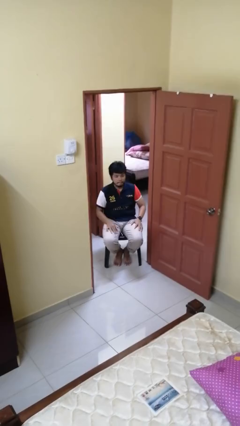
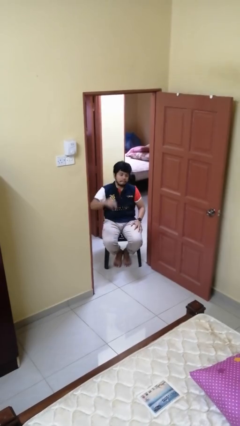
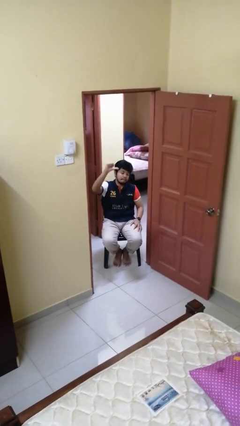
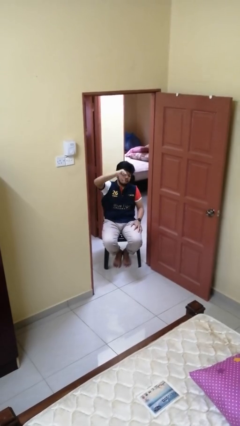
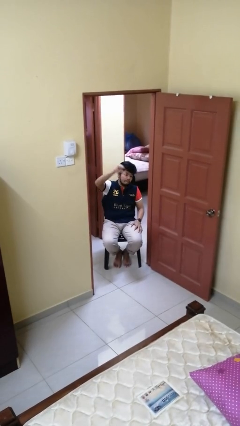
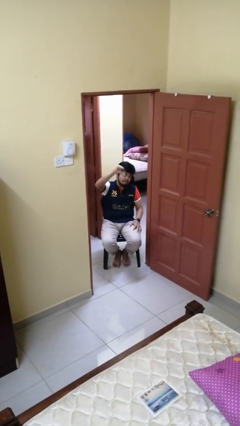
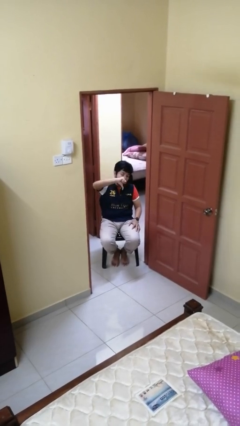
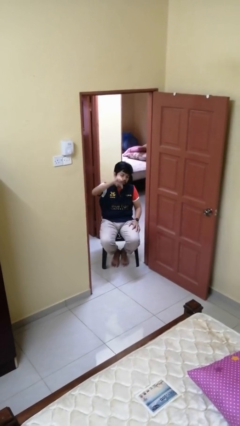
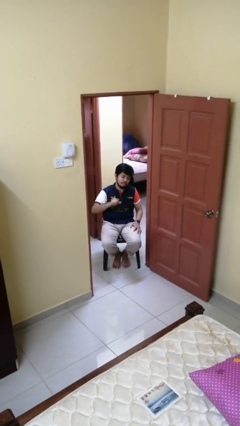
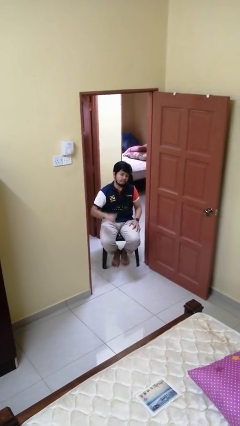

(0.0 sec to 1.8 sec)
person gestures thumbs down

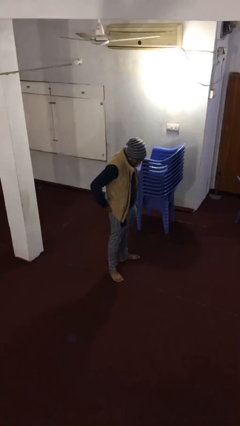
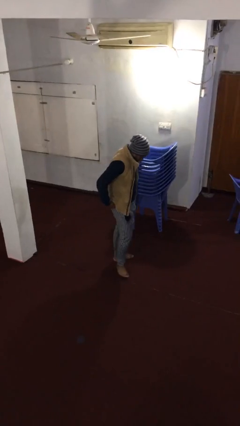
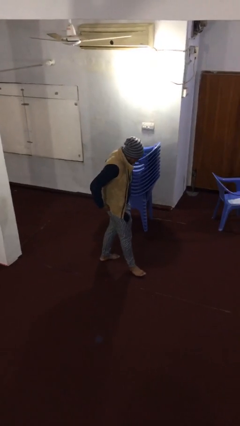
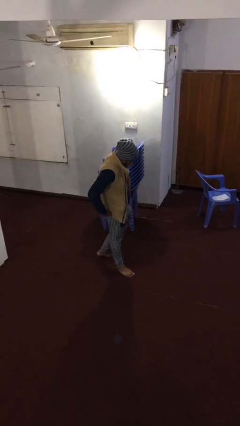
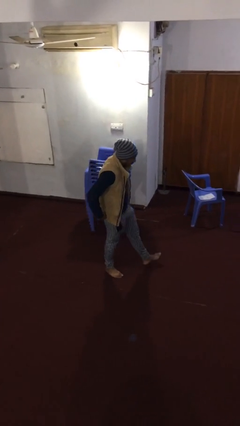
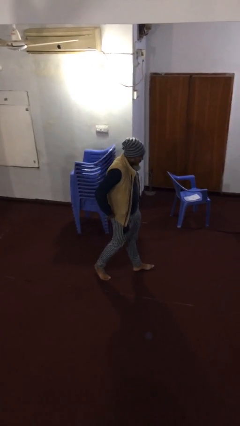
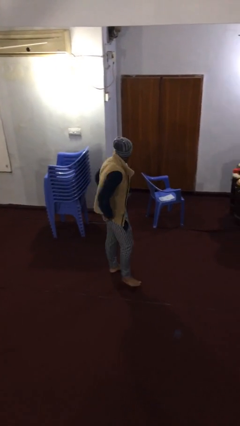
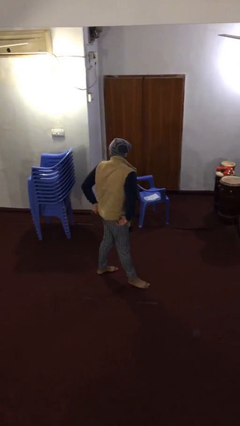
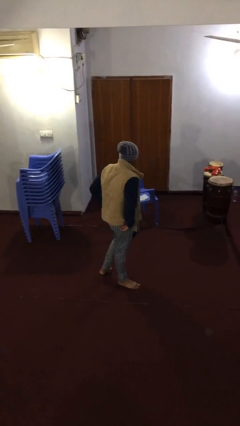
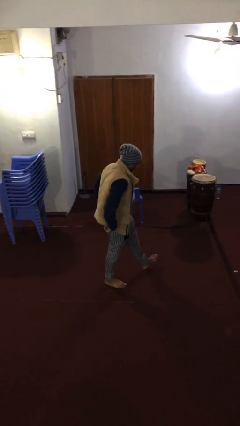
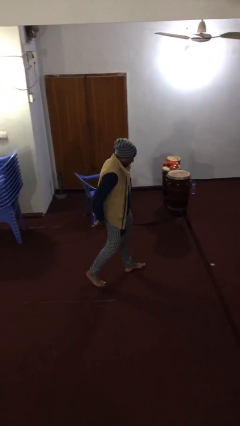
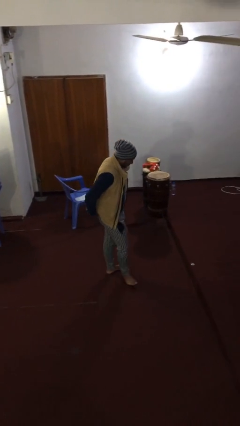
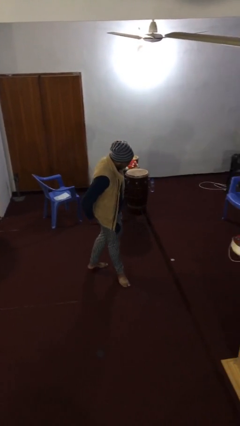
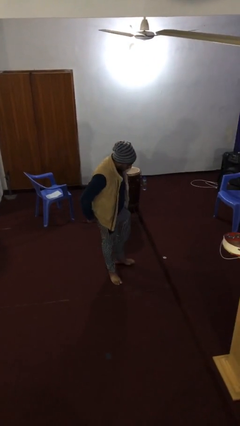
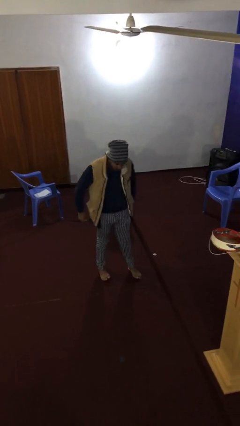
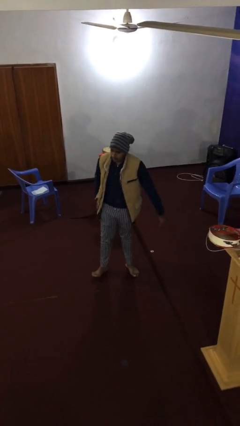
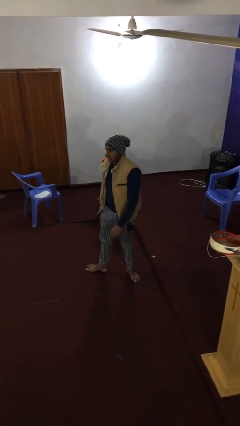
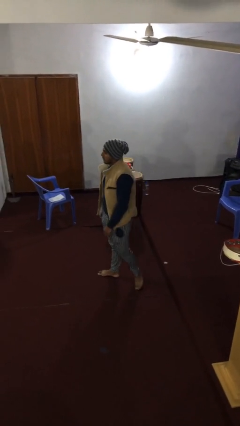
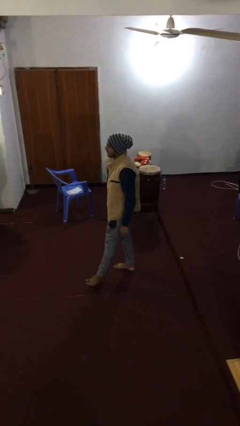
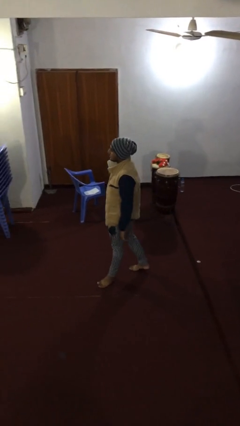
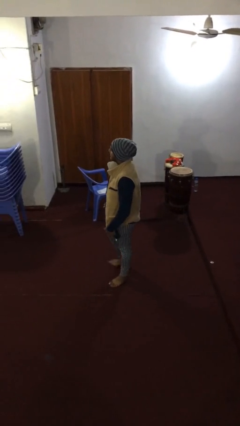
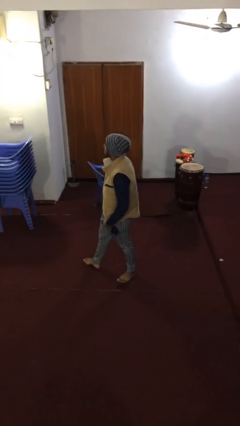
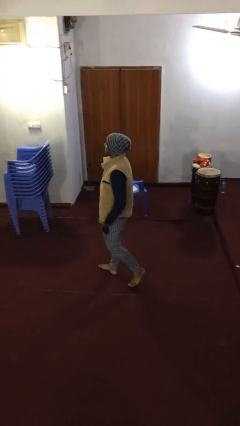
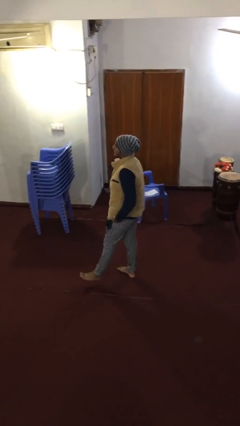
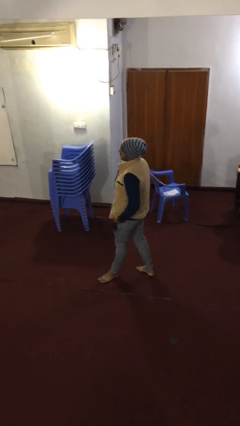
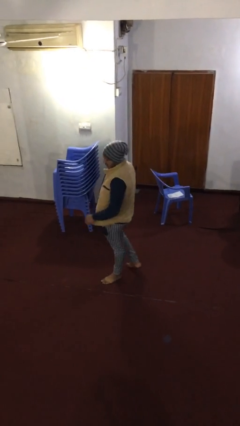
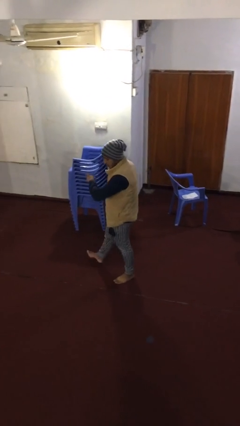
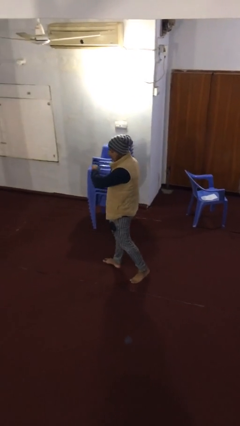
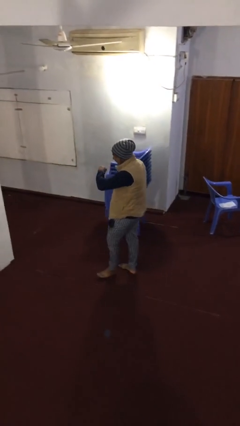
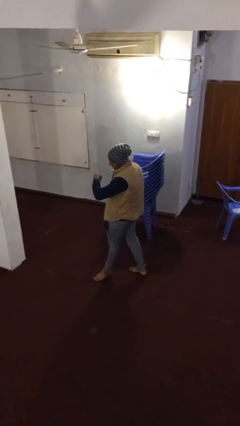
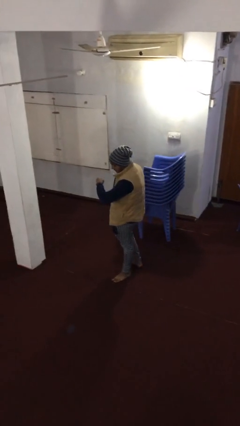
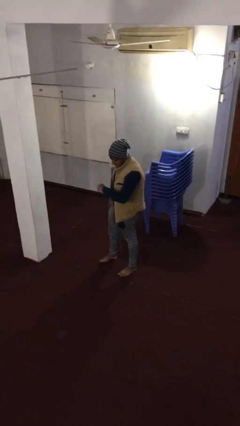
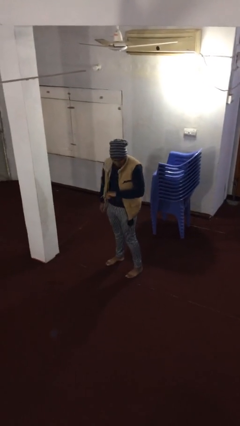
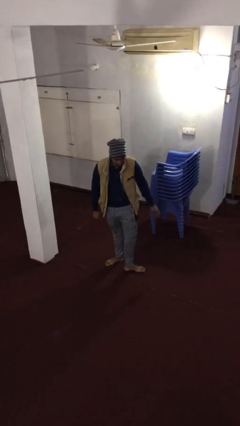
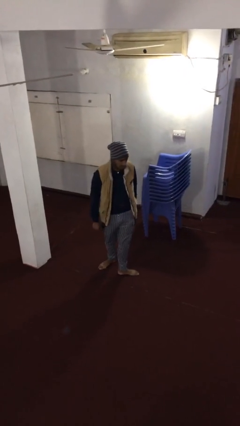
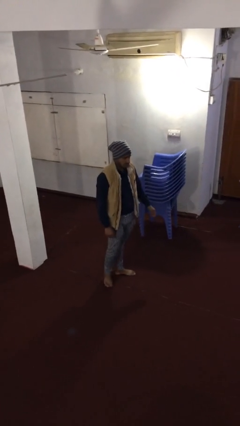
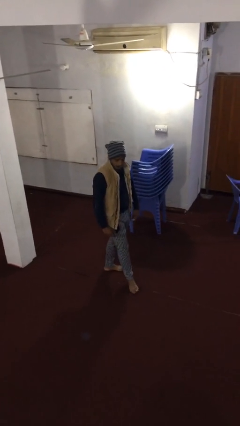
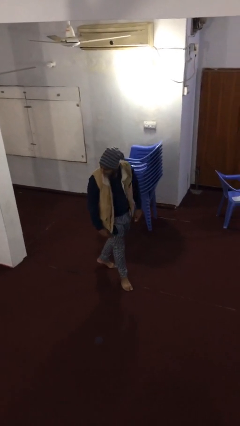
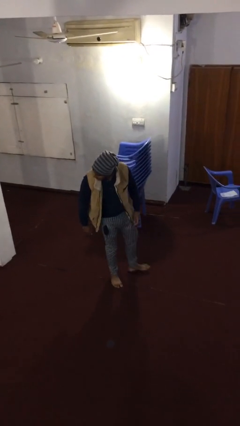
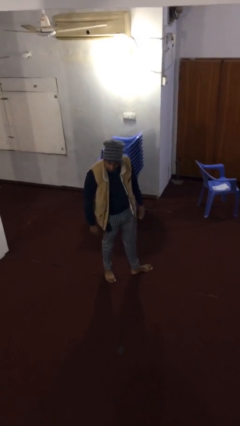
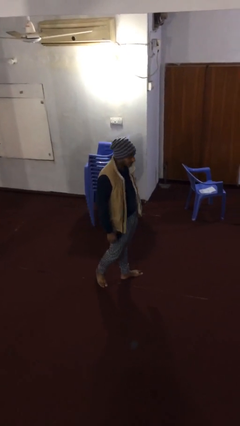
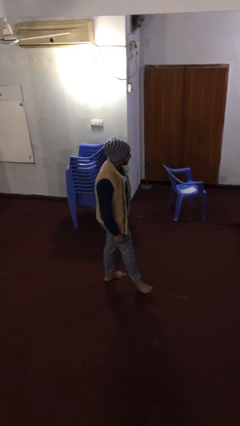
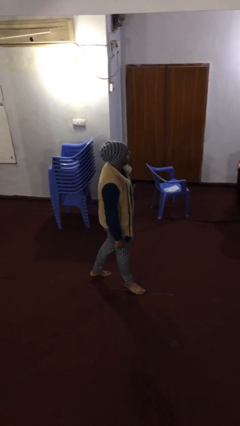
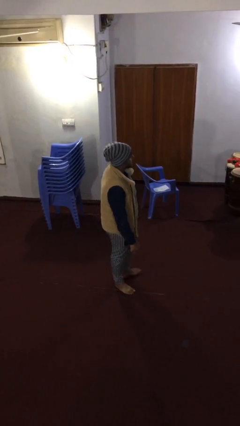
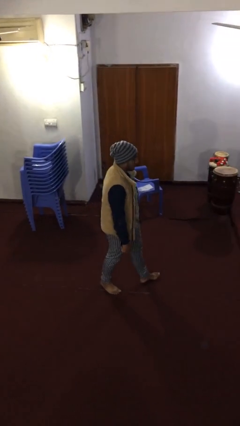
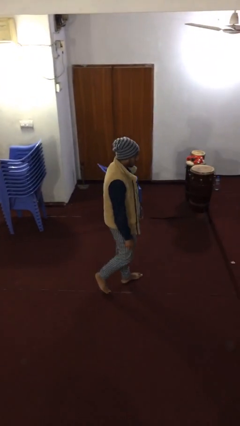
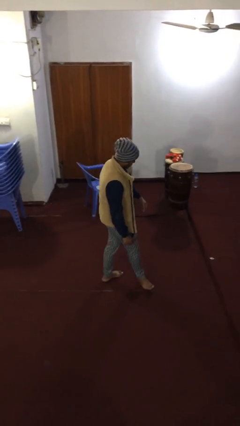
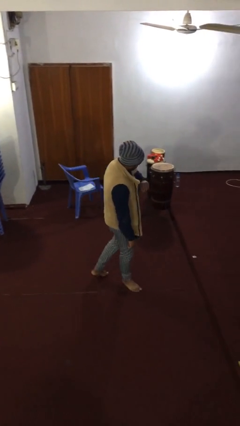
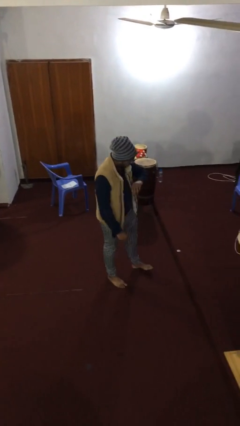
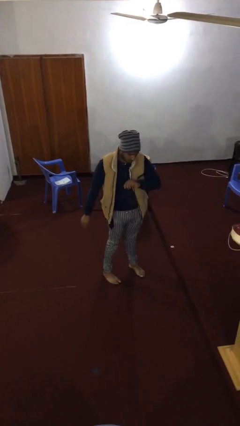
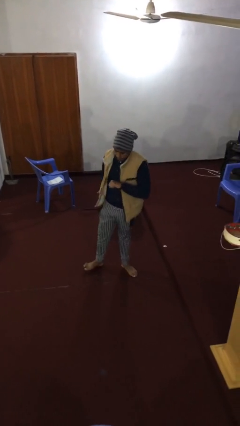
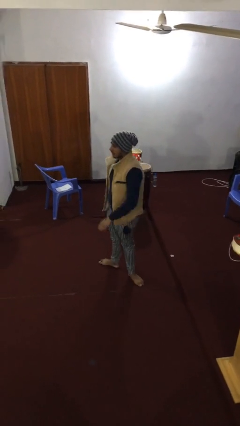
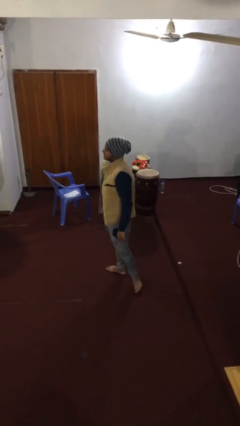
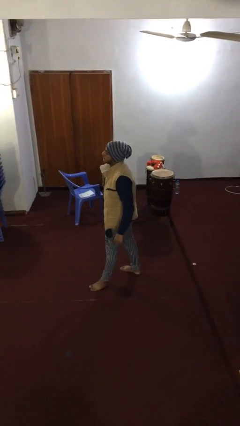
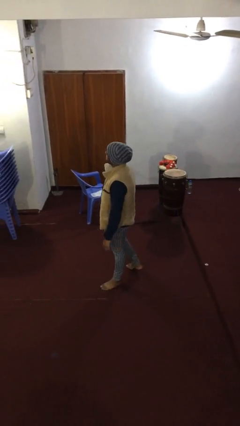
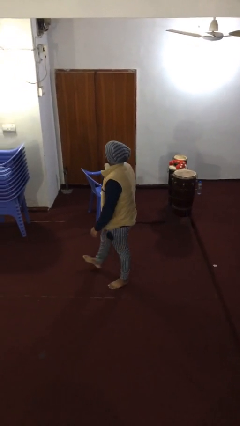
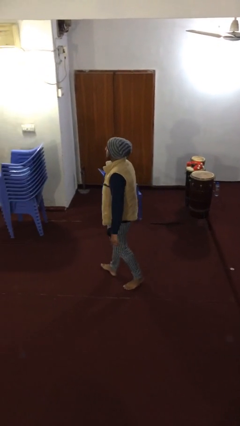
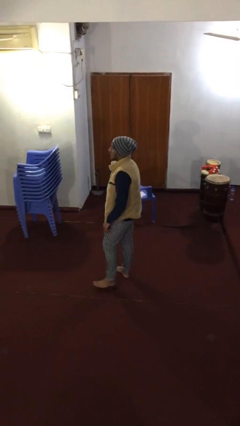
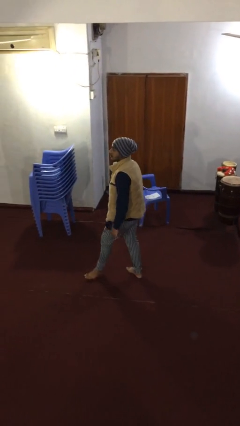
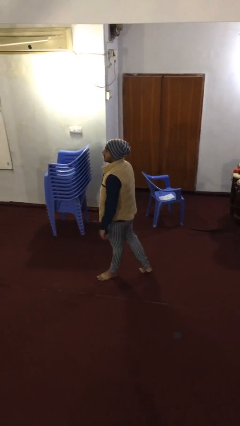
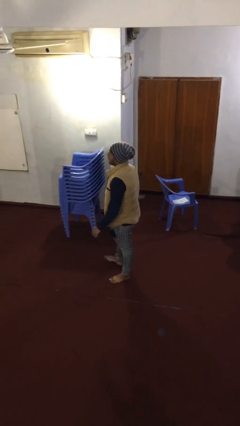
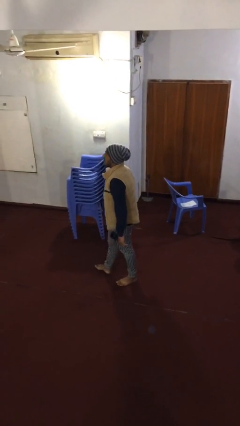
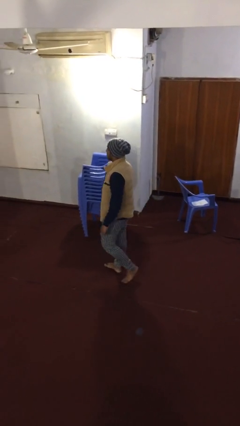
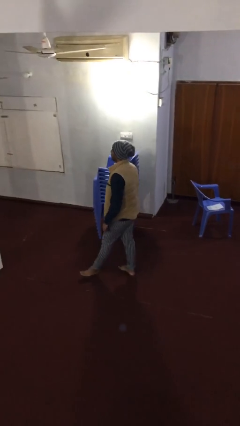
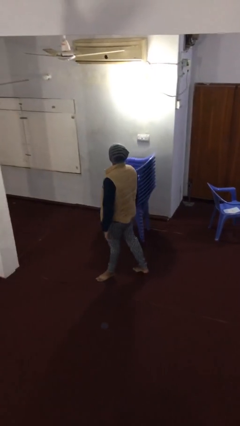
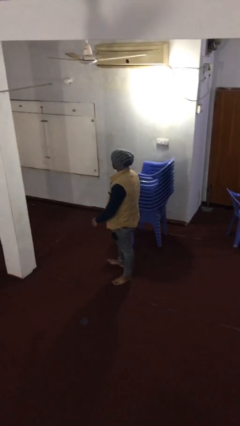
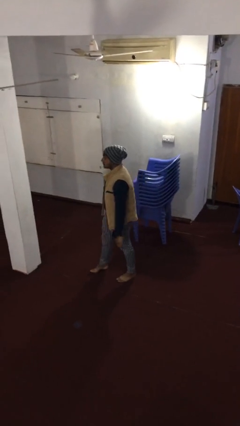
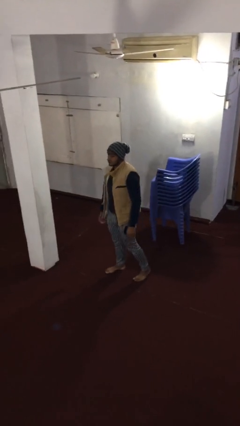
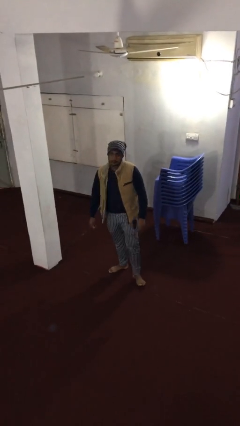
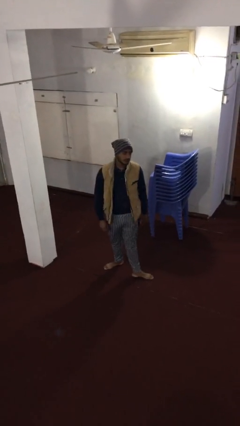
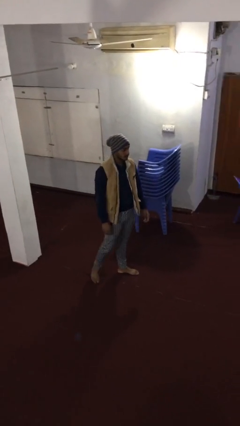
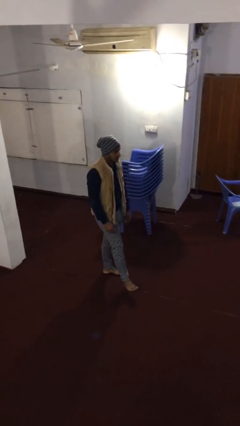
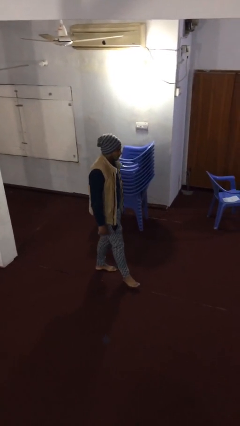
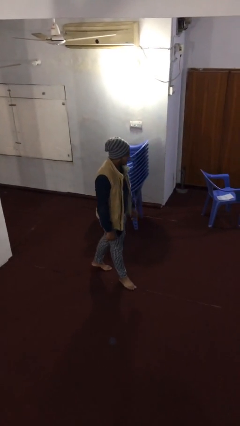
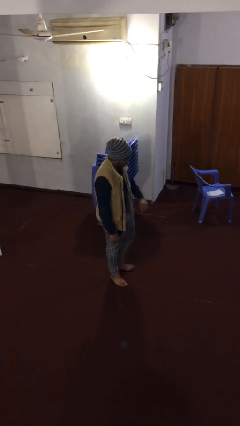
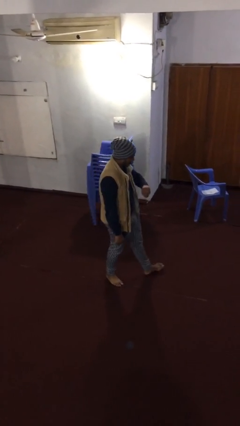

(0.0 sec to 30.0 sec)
person walks

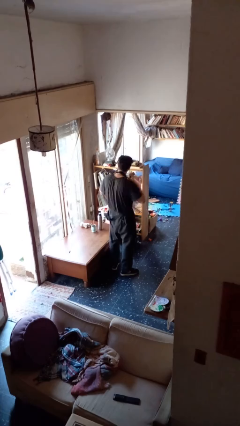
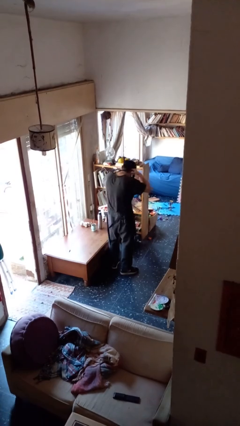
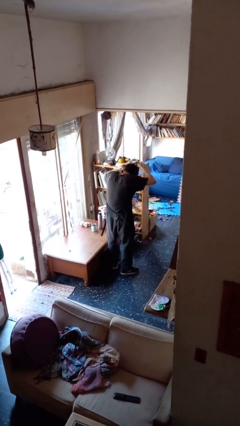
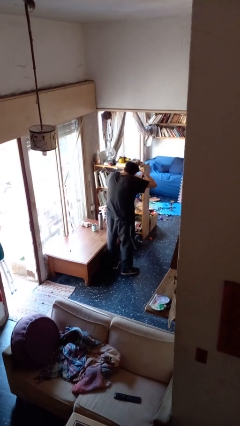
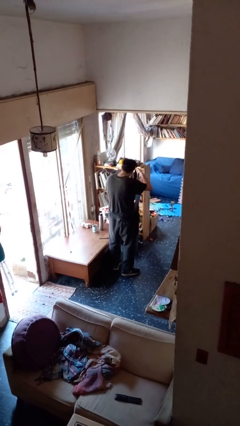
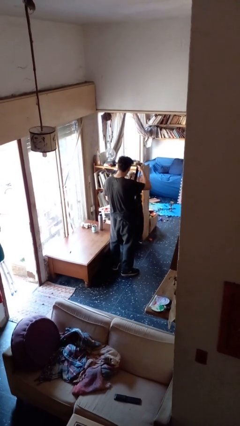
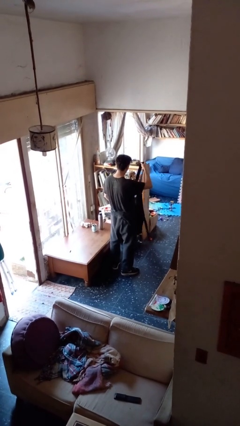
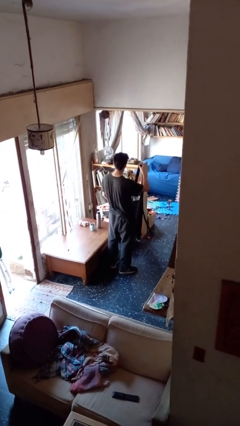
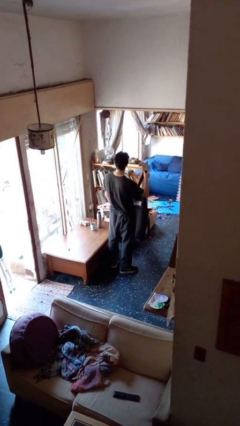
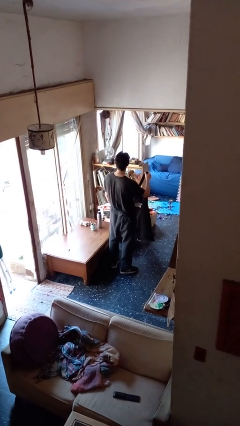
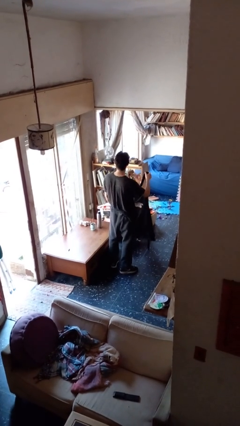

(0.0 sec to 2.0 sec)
person takes off apron
